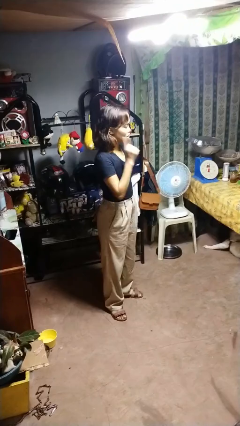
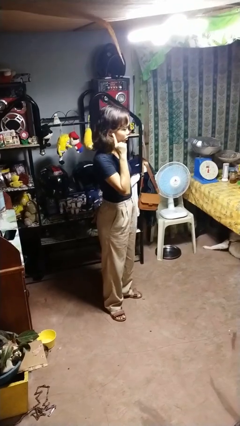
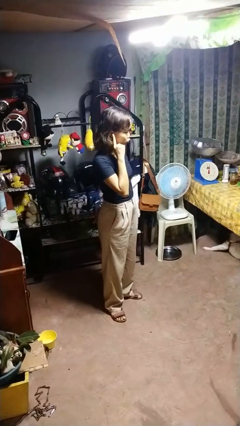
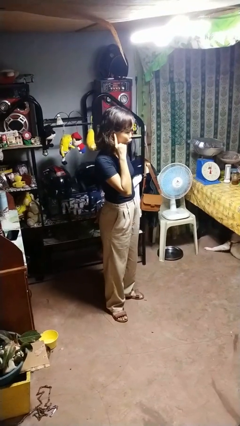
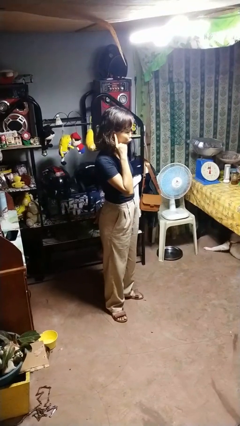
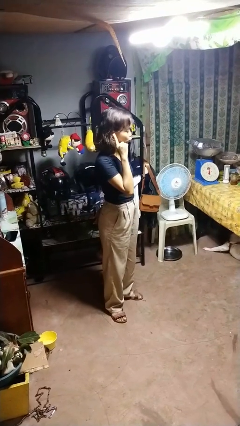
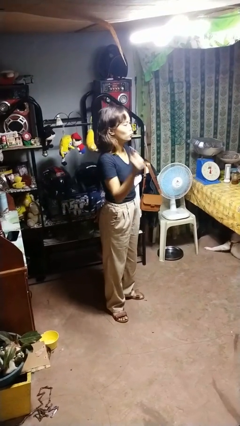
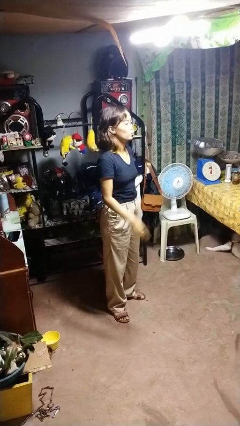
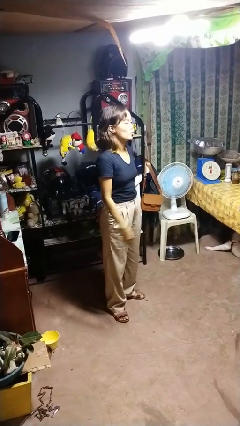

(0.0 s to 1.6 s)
person gestures listen closely

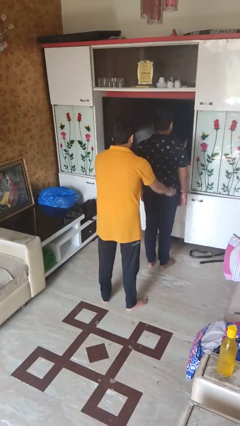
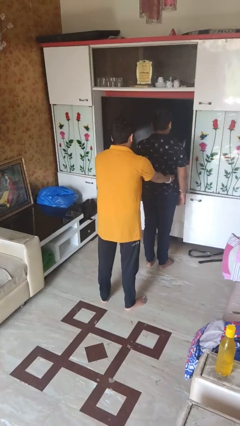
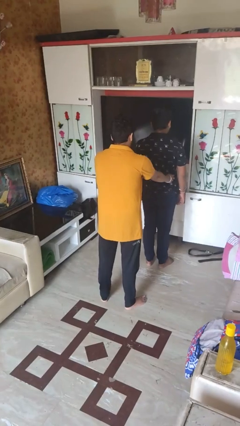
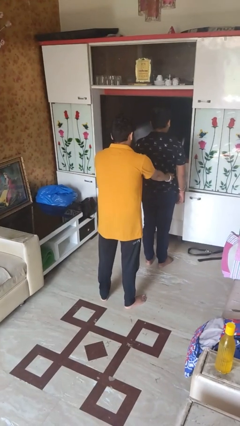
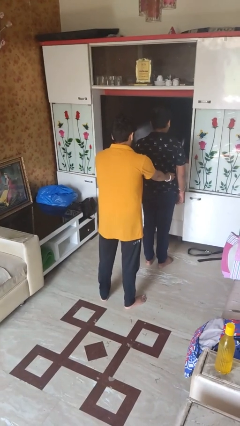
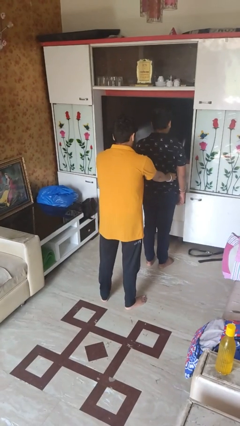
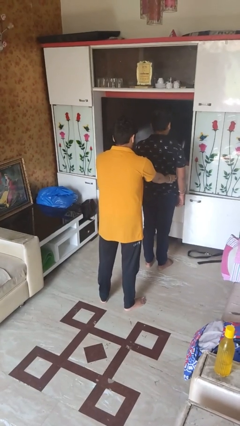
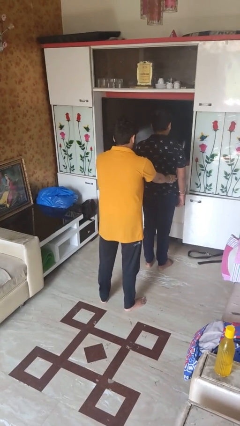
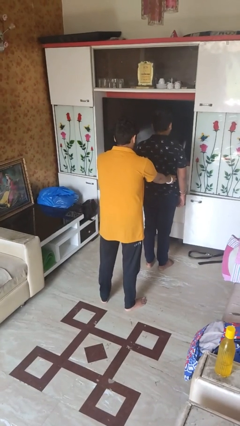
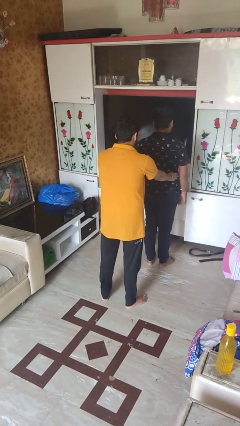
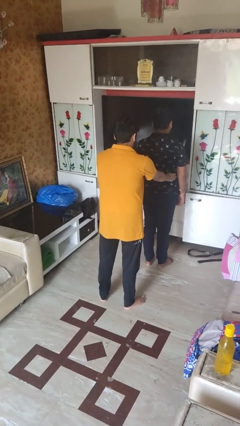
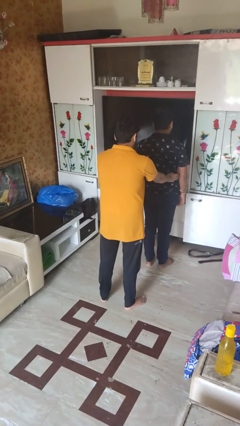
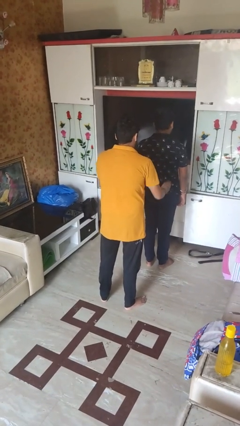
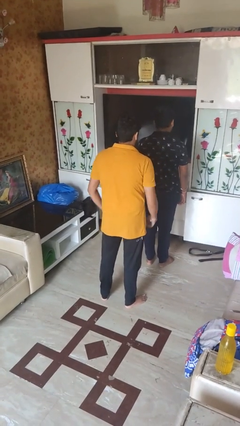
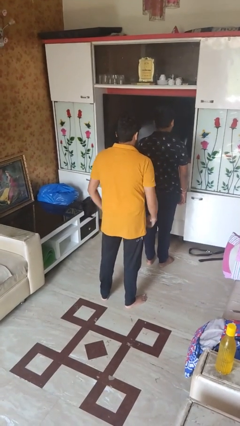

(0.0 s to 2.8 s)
person tickles person

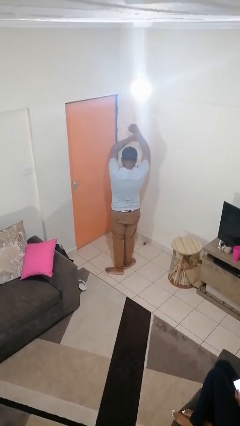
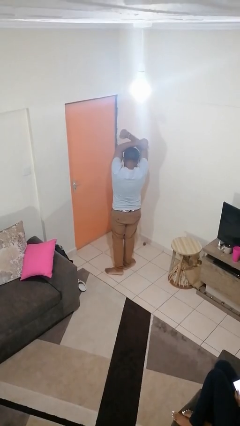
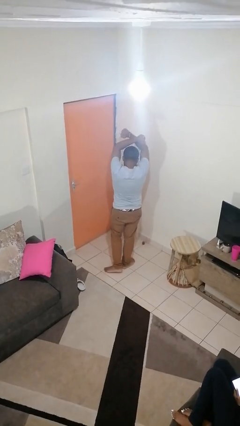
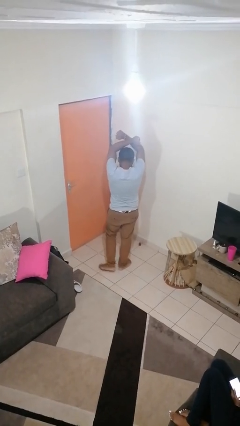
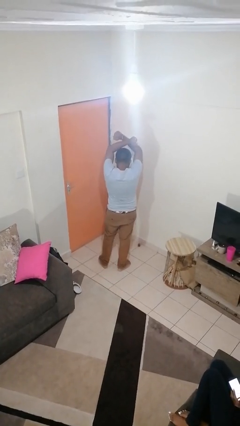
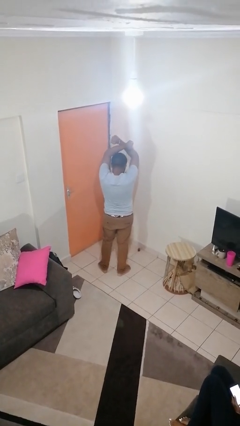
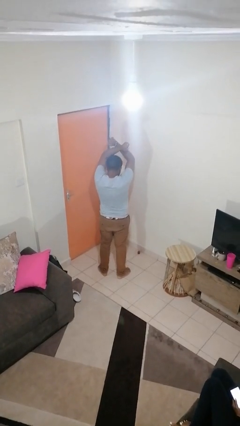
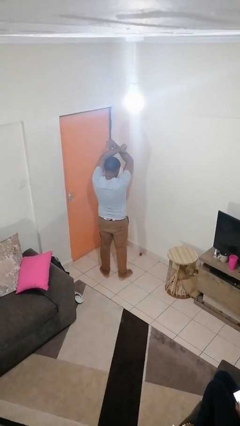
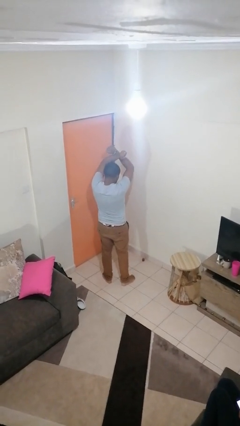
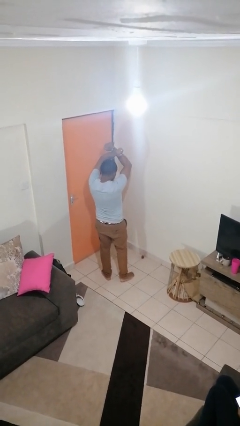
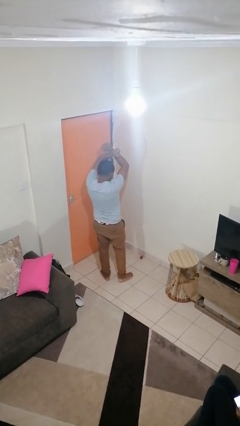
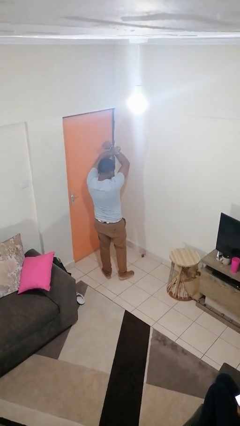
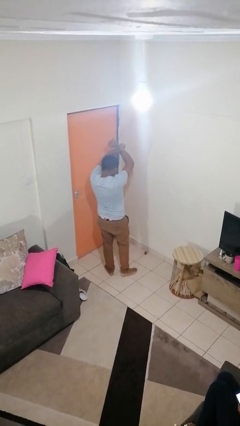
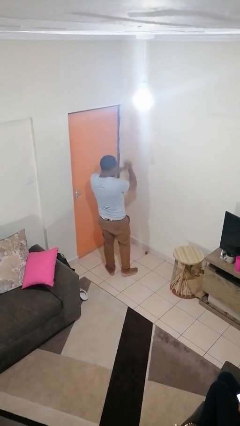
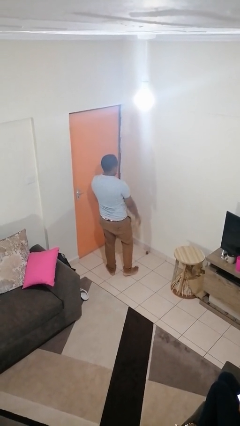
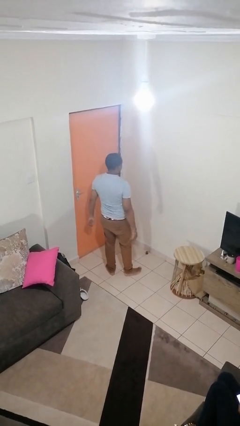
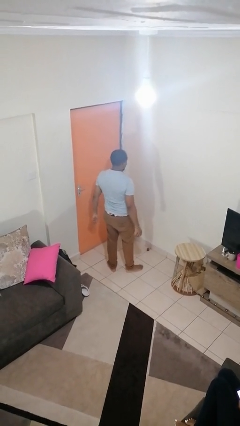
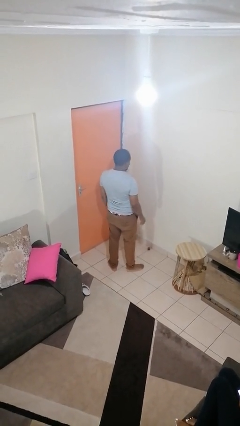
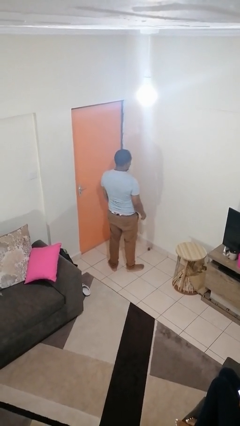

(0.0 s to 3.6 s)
person gestures arms x

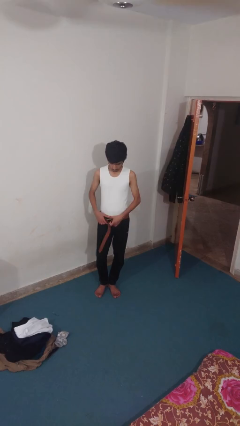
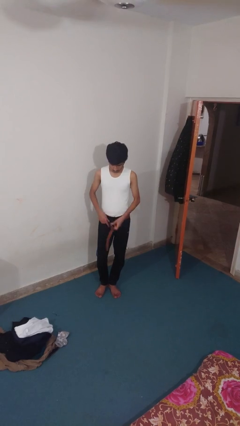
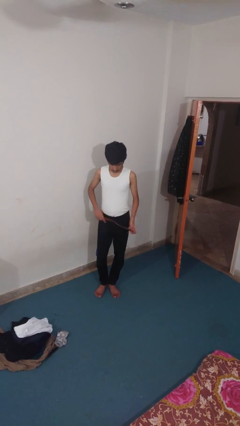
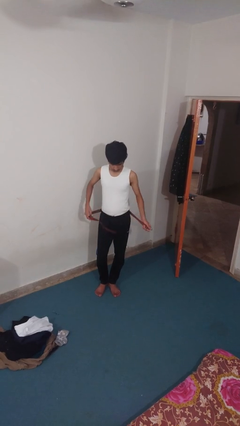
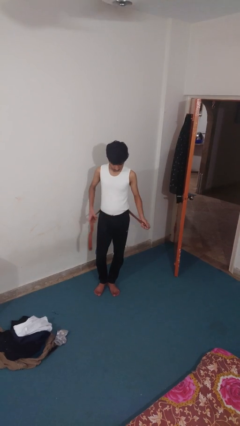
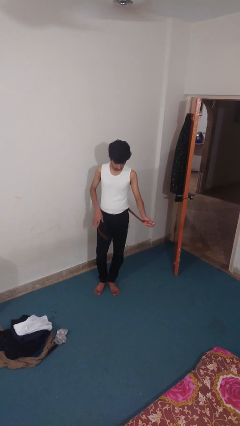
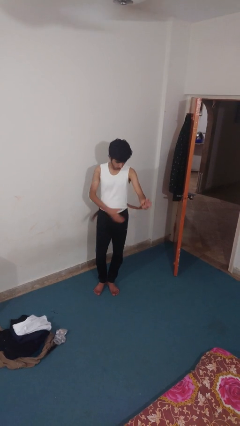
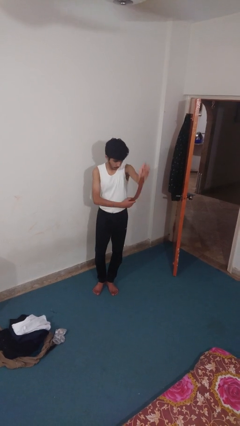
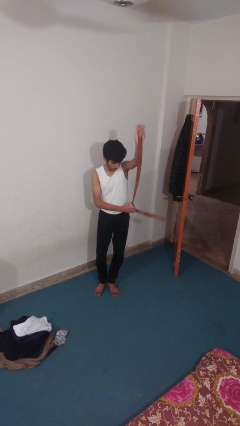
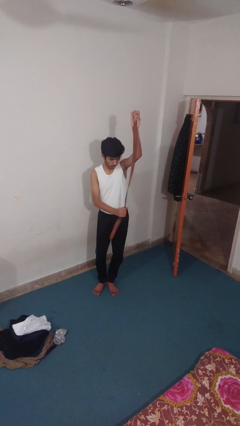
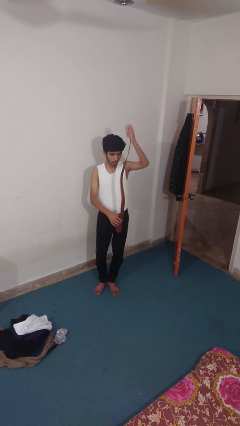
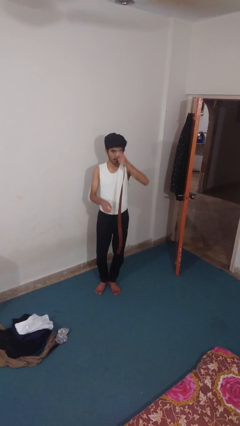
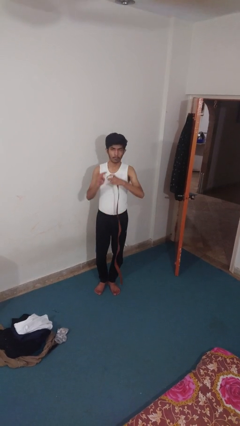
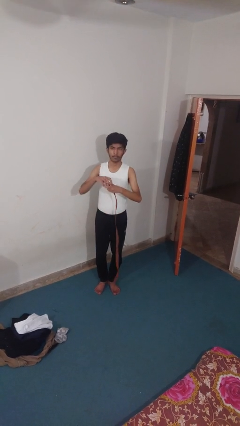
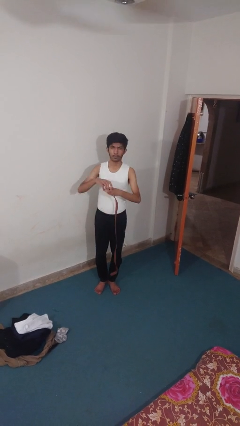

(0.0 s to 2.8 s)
person takes off belt

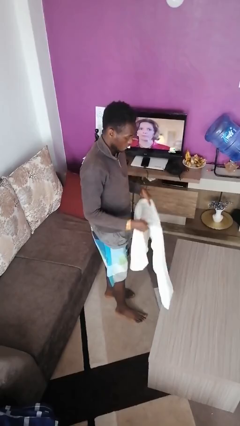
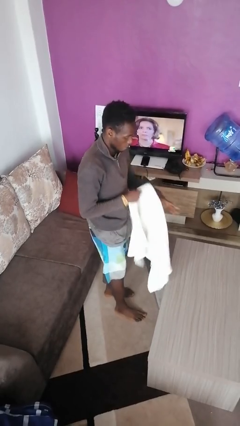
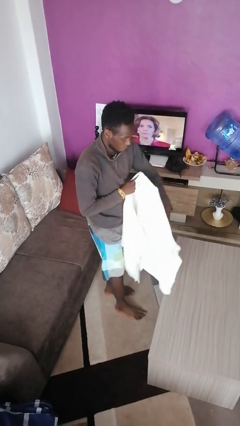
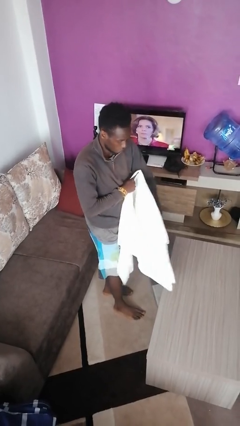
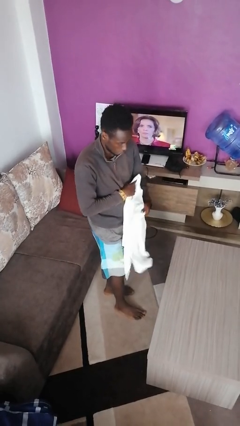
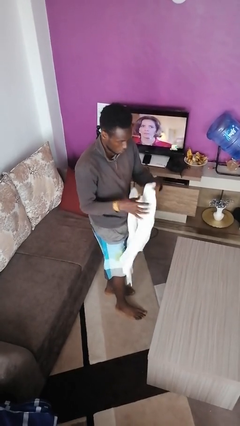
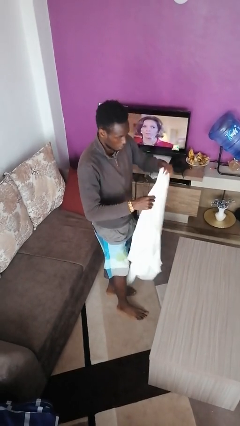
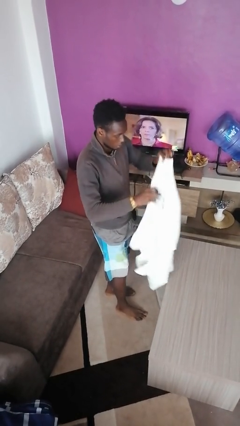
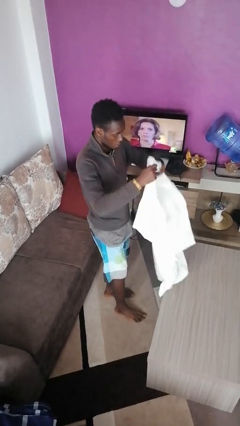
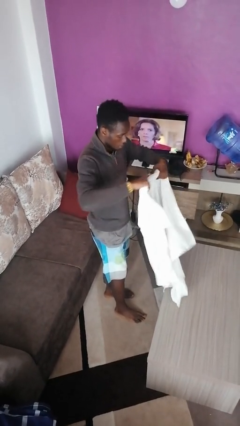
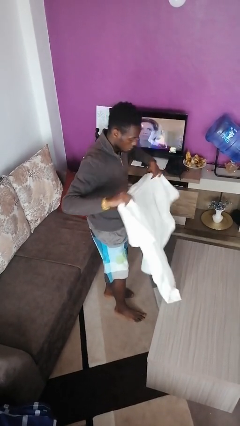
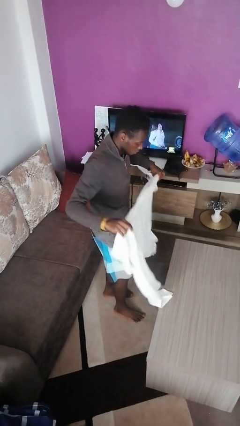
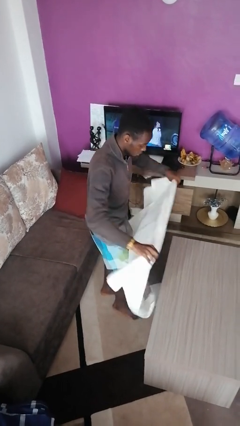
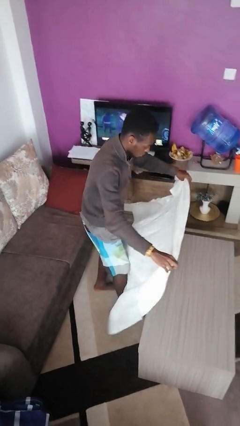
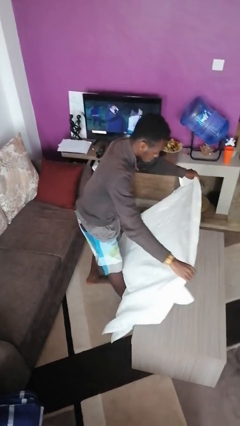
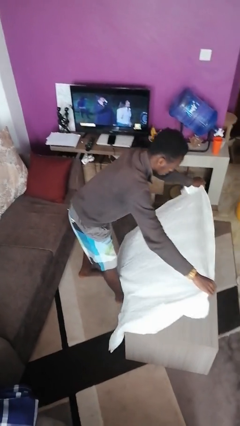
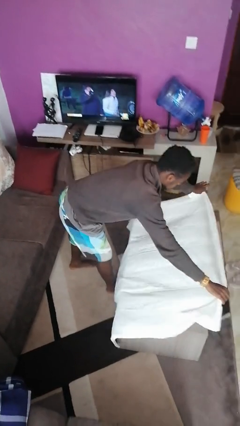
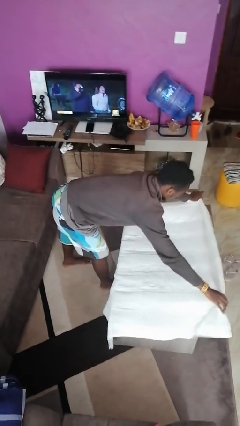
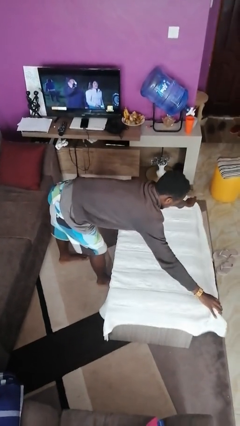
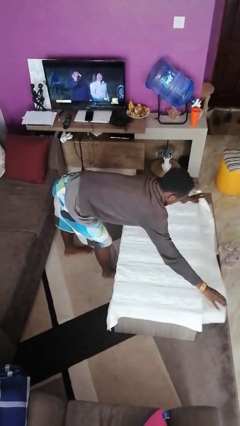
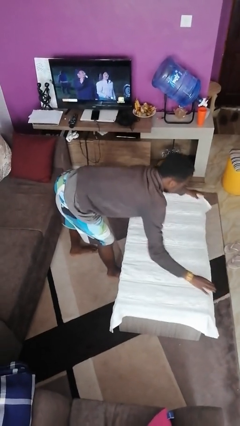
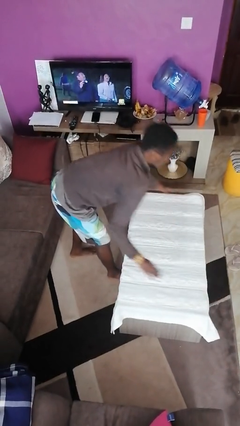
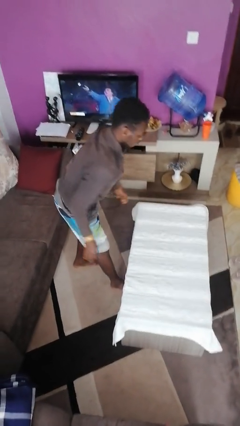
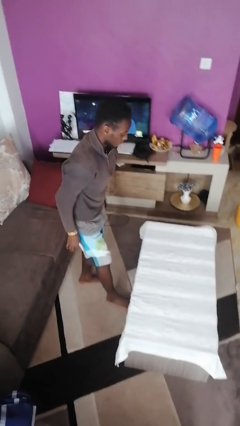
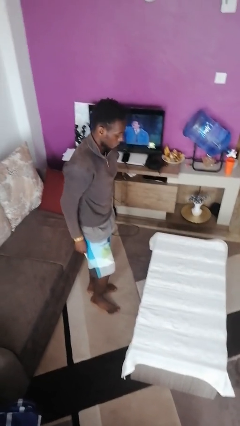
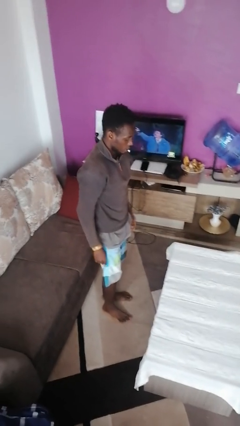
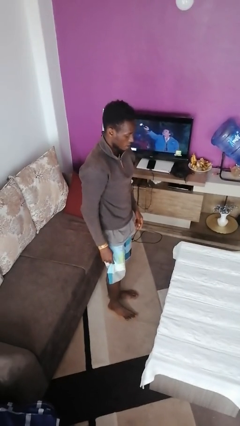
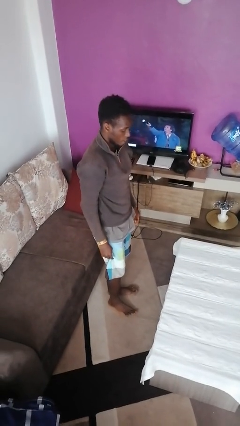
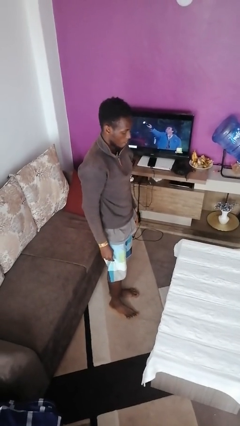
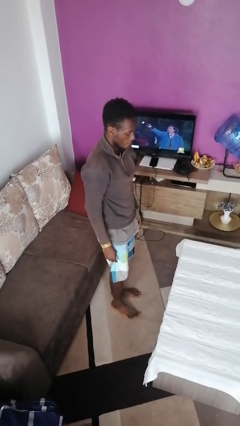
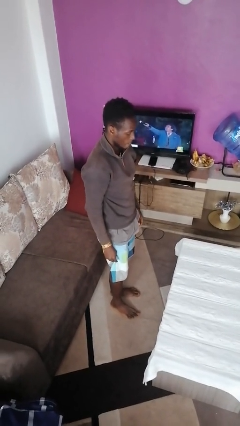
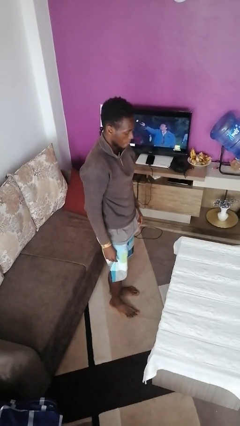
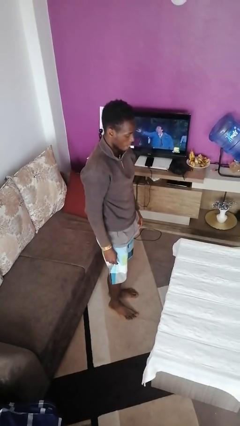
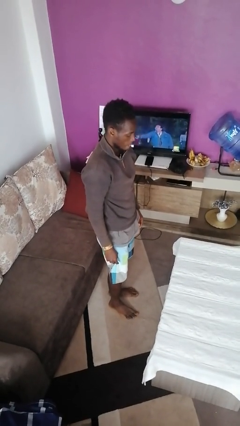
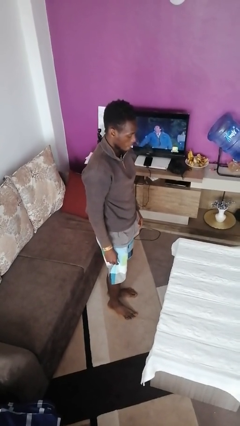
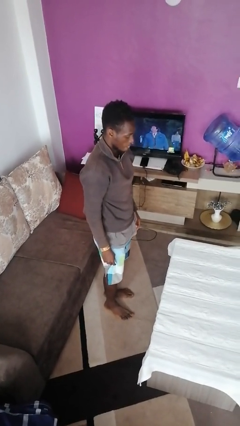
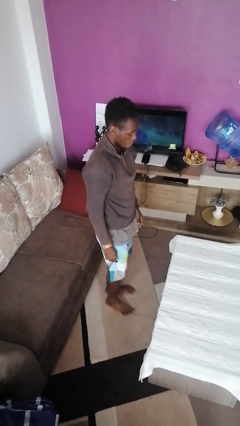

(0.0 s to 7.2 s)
person spreads tablecloth
